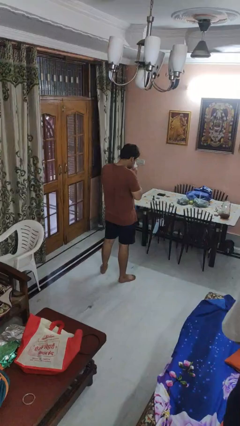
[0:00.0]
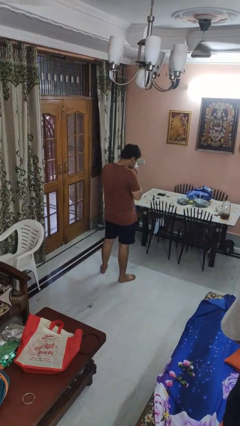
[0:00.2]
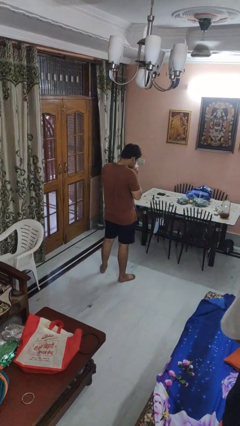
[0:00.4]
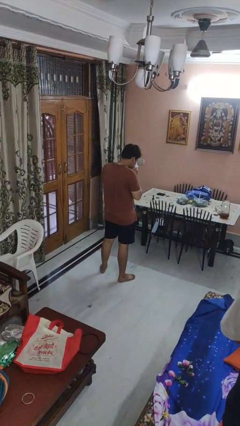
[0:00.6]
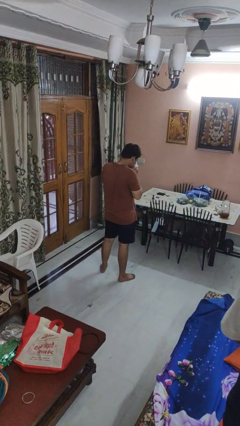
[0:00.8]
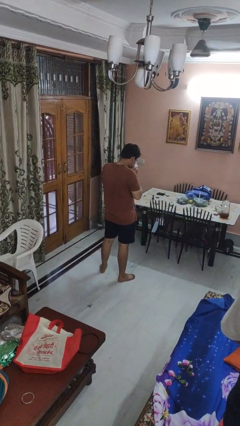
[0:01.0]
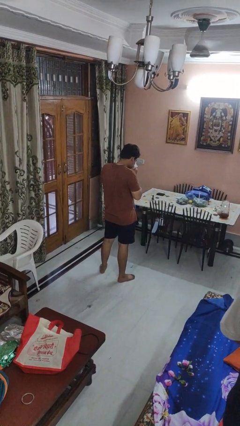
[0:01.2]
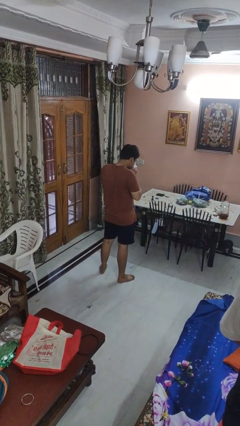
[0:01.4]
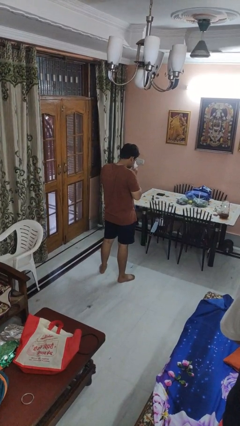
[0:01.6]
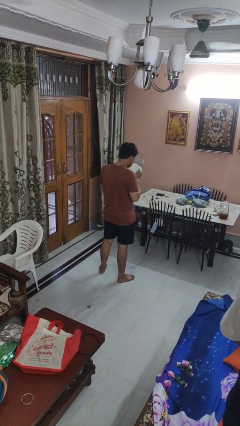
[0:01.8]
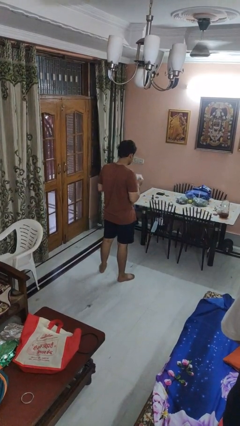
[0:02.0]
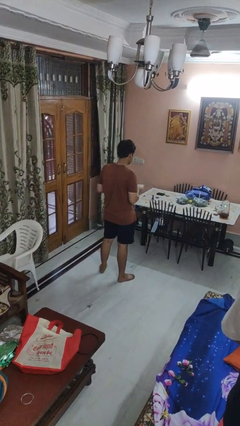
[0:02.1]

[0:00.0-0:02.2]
person blows nose

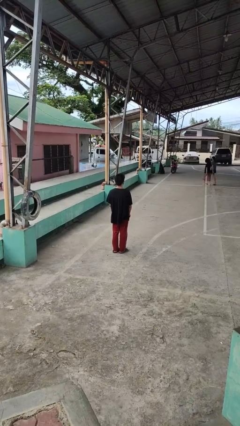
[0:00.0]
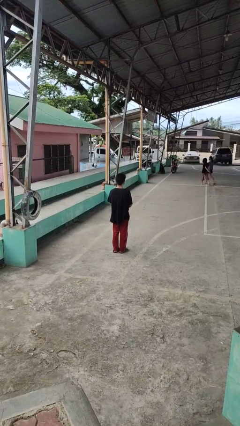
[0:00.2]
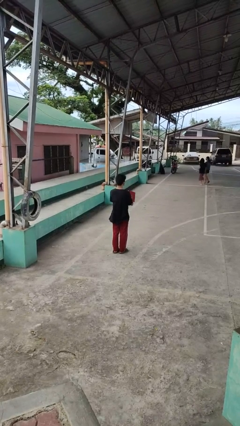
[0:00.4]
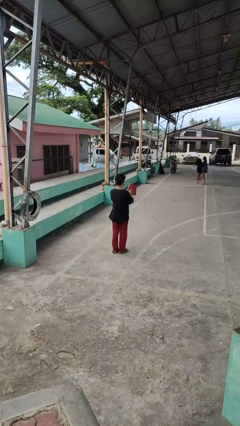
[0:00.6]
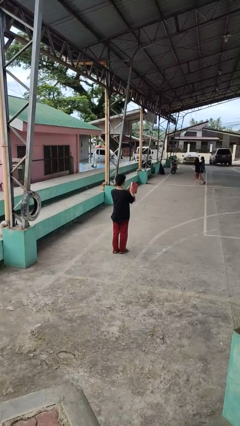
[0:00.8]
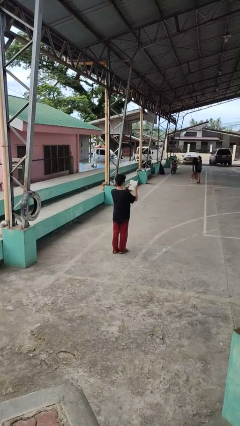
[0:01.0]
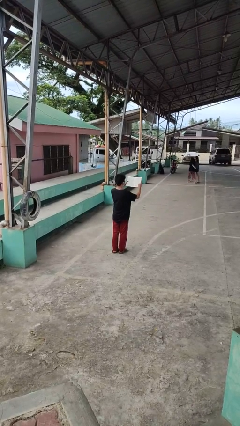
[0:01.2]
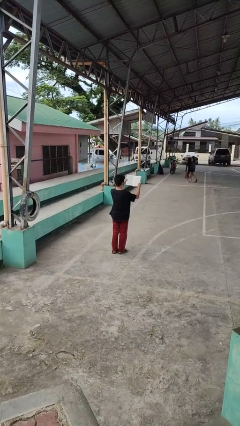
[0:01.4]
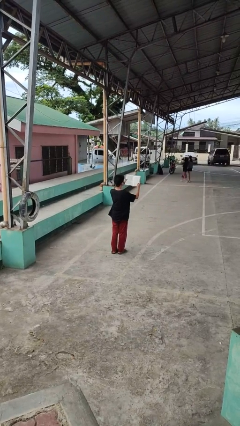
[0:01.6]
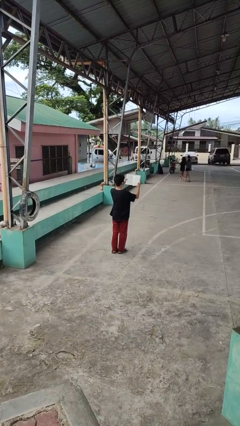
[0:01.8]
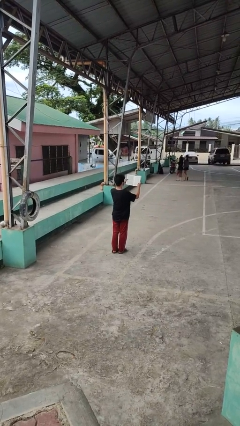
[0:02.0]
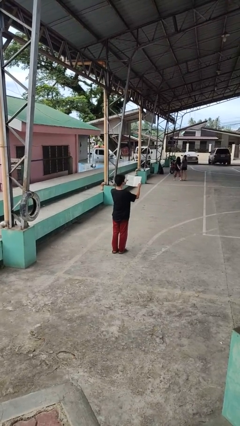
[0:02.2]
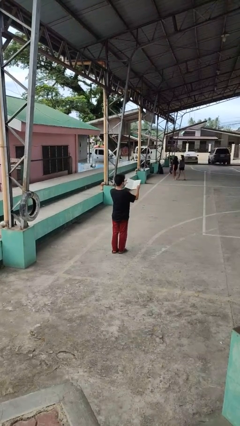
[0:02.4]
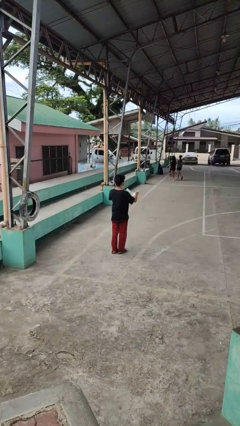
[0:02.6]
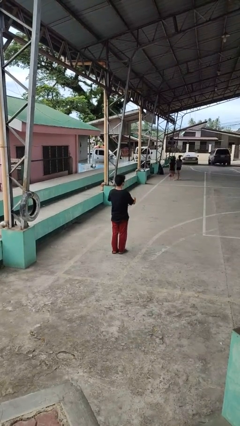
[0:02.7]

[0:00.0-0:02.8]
person reads book

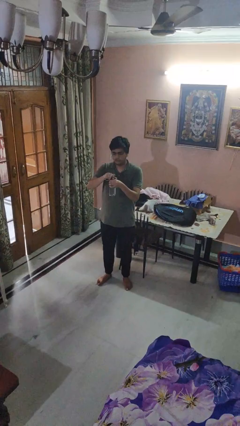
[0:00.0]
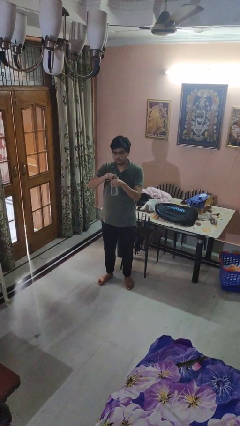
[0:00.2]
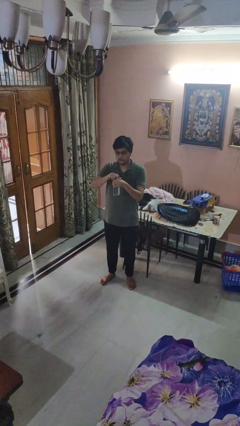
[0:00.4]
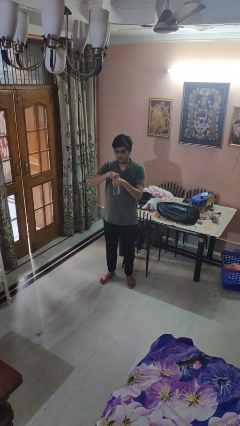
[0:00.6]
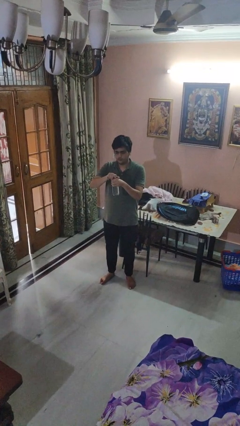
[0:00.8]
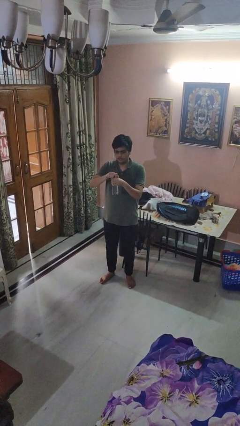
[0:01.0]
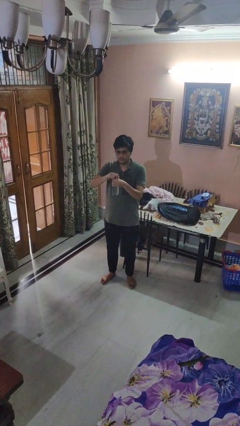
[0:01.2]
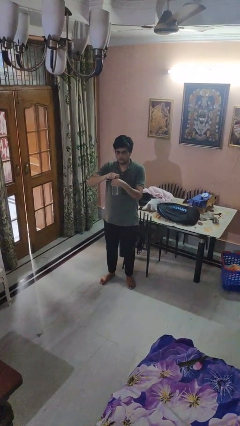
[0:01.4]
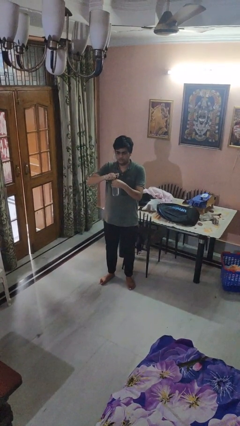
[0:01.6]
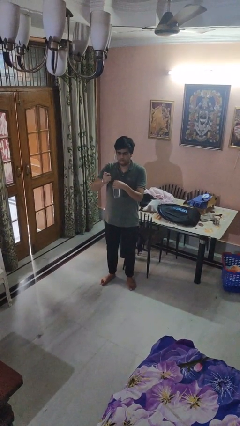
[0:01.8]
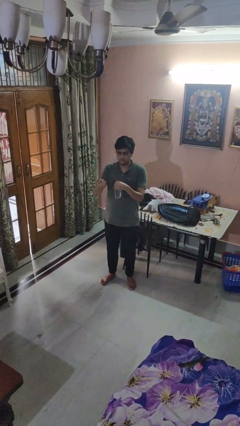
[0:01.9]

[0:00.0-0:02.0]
person unscrews lid from bottle

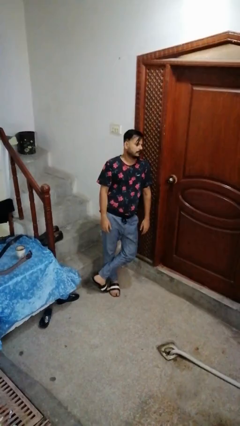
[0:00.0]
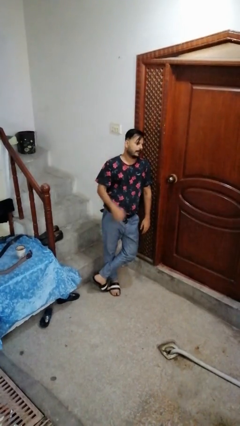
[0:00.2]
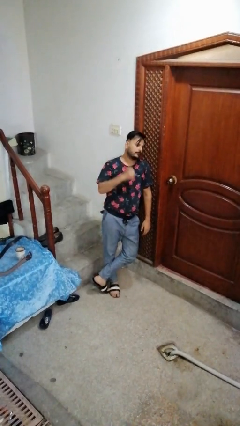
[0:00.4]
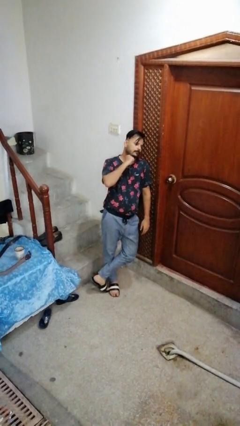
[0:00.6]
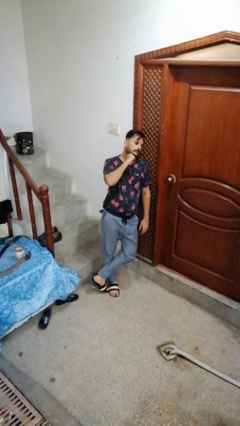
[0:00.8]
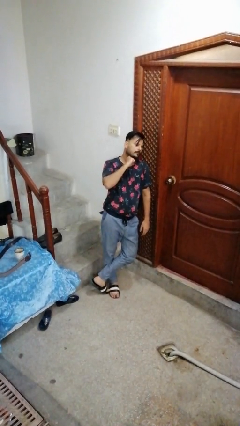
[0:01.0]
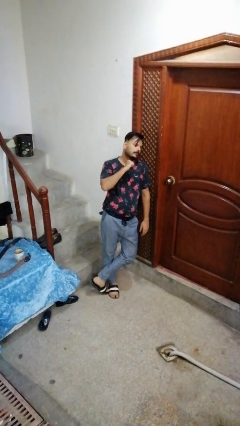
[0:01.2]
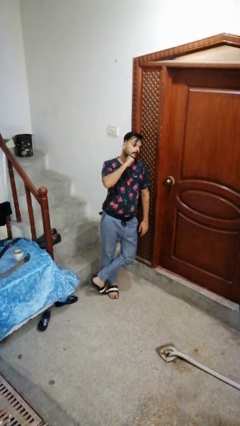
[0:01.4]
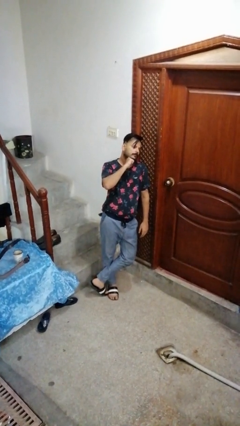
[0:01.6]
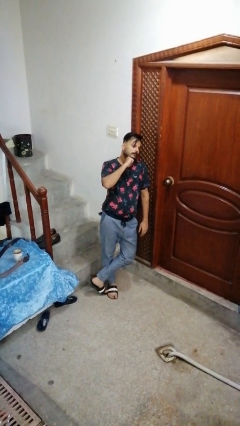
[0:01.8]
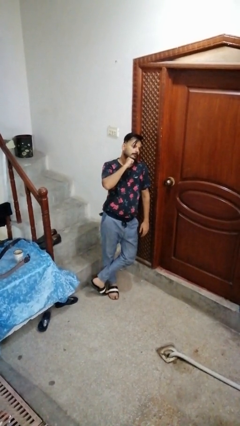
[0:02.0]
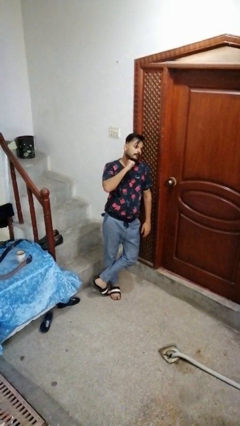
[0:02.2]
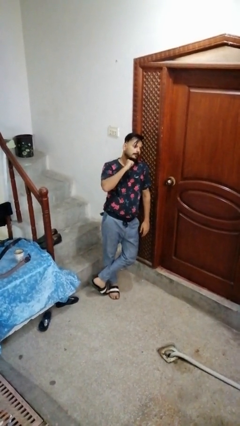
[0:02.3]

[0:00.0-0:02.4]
person strokes chin

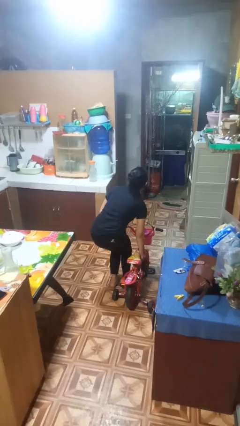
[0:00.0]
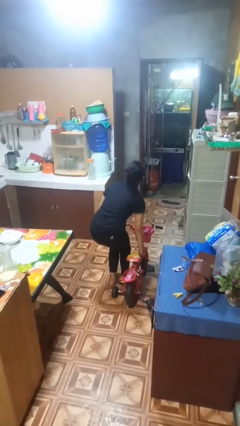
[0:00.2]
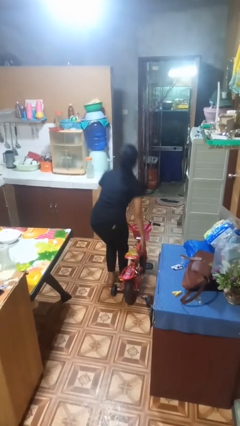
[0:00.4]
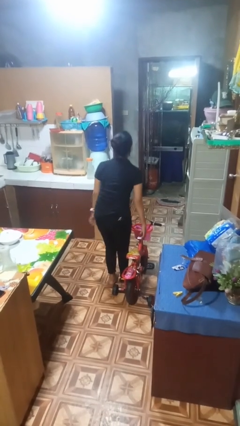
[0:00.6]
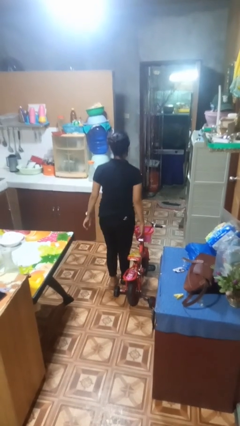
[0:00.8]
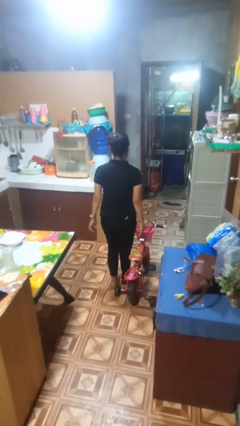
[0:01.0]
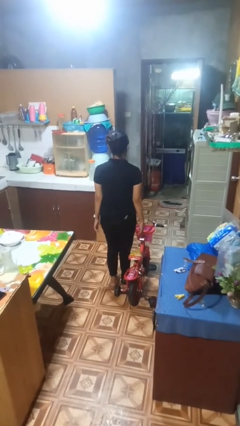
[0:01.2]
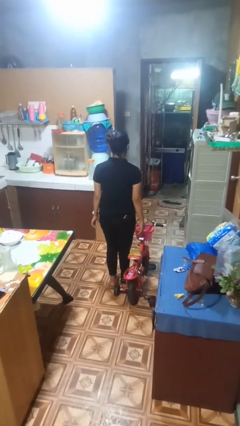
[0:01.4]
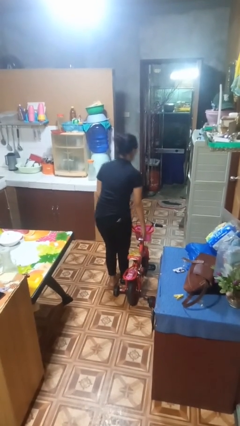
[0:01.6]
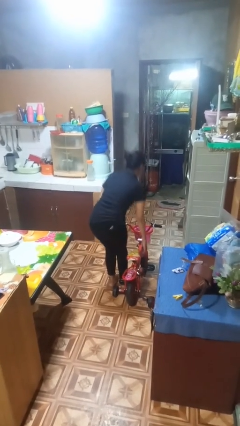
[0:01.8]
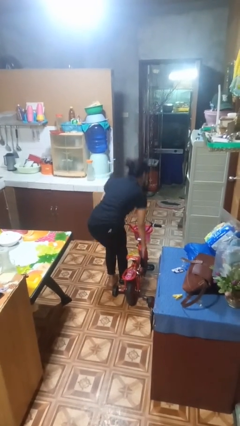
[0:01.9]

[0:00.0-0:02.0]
person carries bicycle

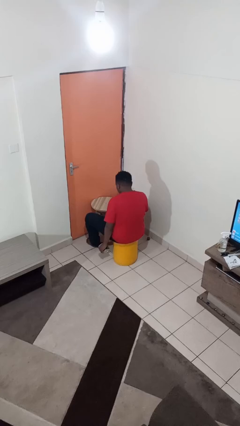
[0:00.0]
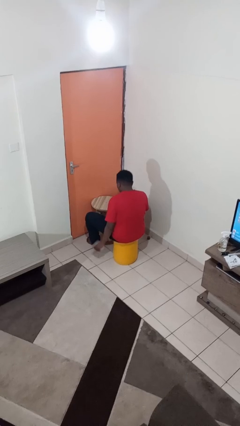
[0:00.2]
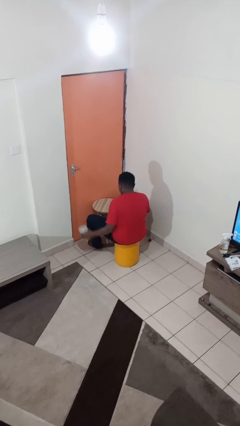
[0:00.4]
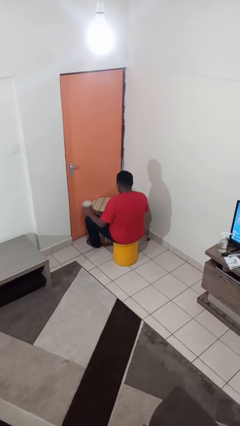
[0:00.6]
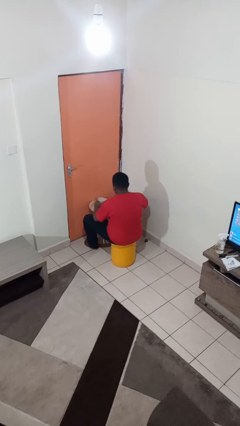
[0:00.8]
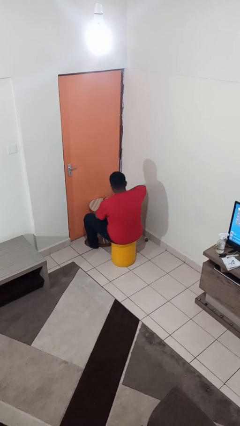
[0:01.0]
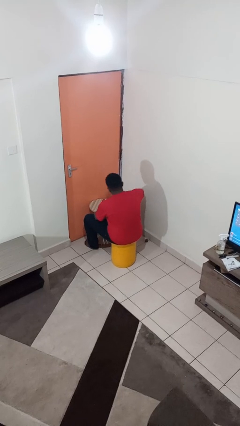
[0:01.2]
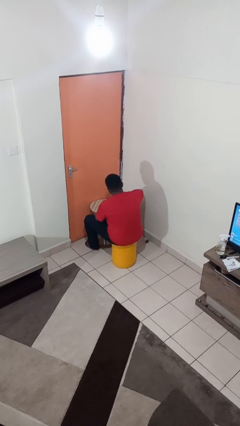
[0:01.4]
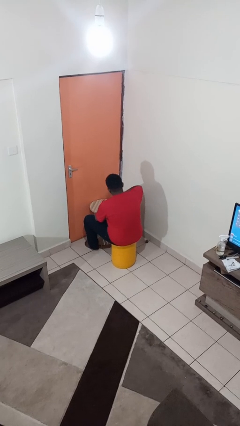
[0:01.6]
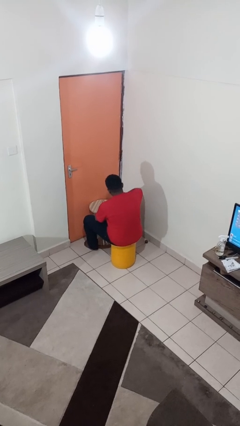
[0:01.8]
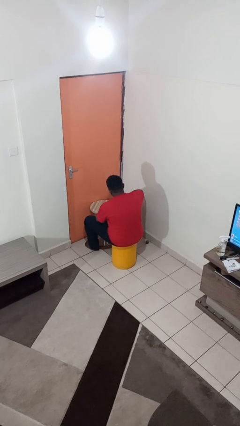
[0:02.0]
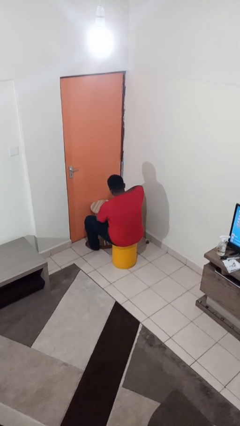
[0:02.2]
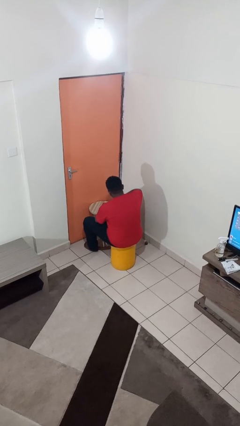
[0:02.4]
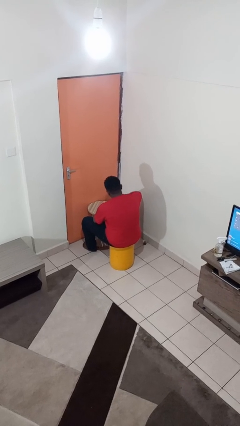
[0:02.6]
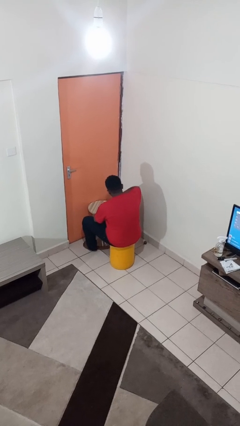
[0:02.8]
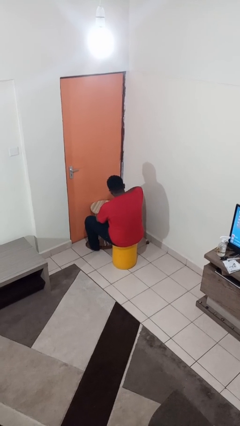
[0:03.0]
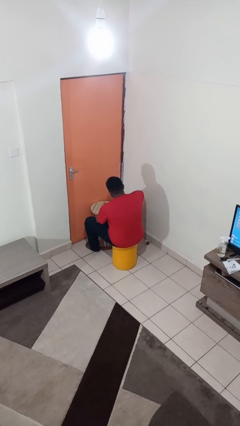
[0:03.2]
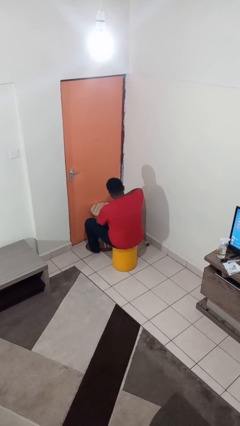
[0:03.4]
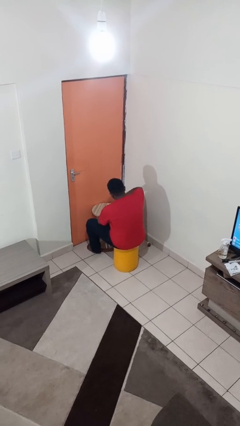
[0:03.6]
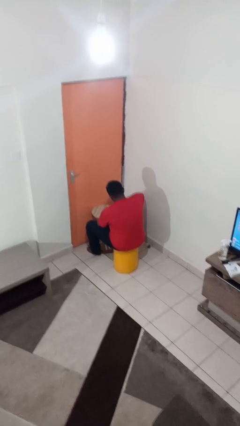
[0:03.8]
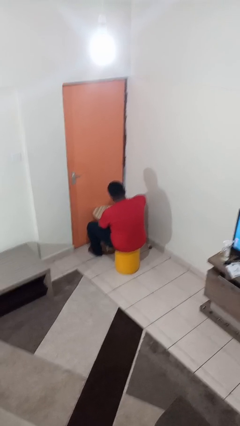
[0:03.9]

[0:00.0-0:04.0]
person opens can with can opener

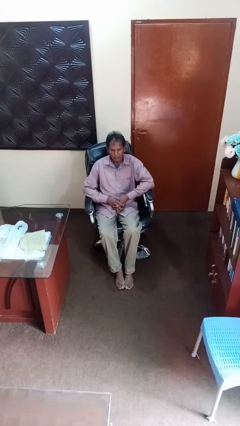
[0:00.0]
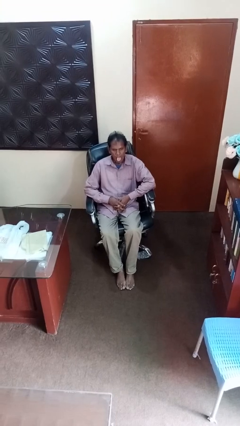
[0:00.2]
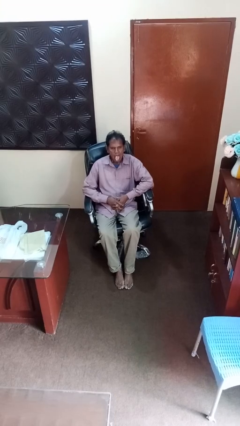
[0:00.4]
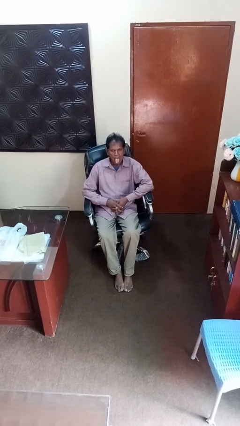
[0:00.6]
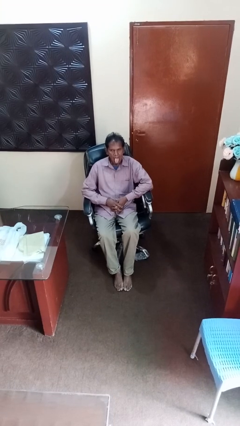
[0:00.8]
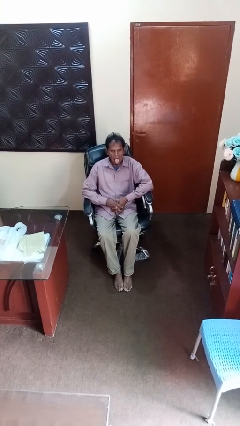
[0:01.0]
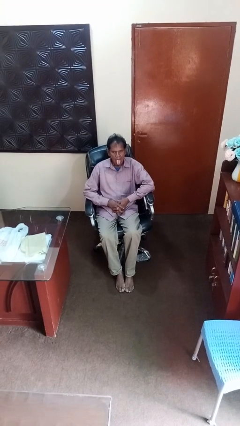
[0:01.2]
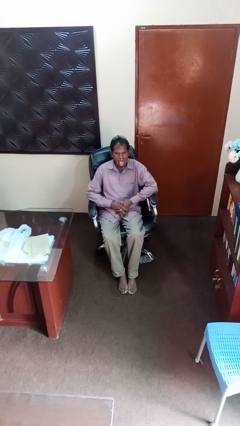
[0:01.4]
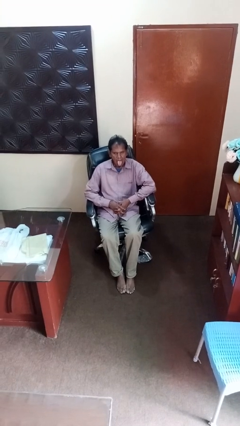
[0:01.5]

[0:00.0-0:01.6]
person sticks out tongue
